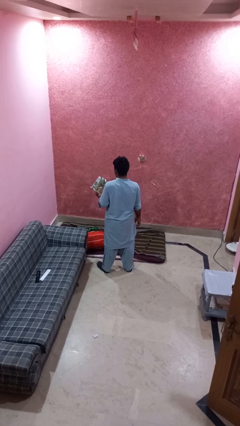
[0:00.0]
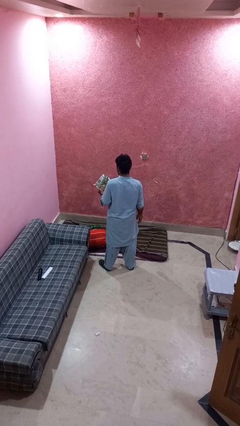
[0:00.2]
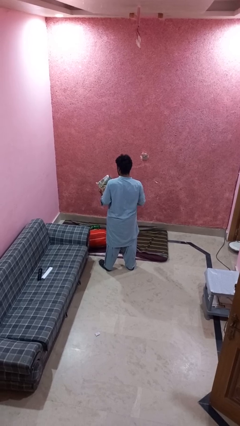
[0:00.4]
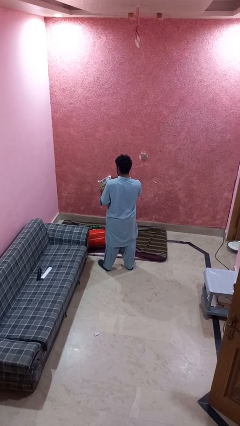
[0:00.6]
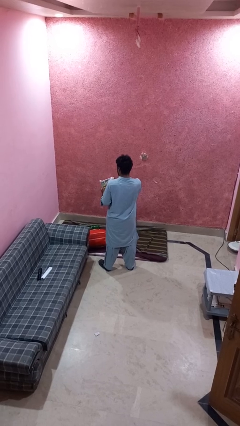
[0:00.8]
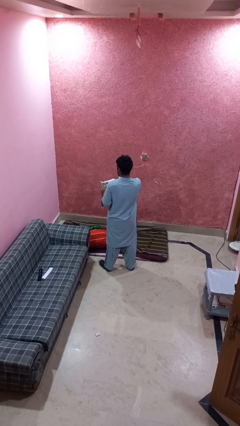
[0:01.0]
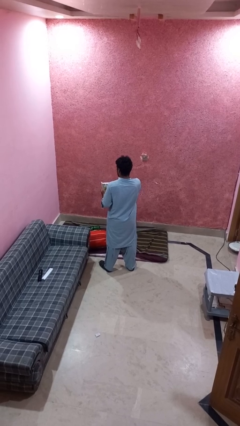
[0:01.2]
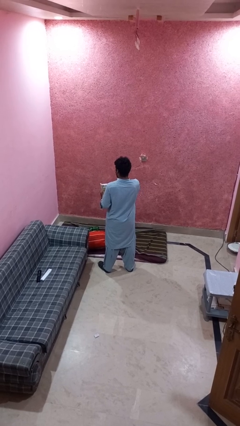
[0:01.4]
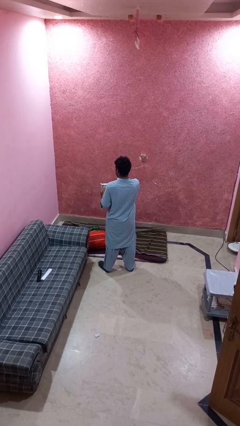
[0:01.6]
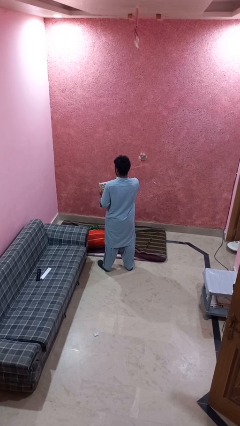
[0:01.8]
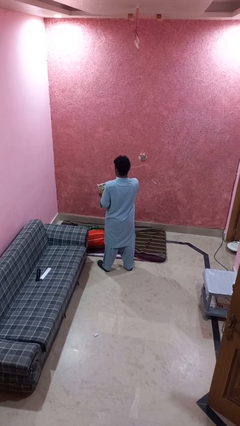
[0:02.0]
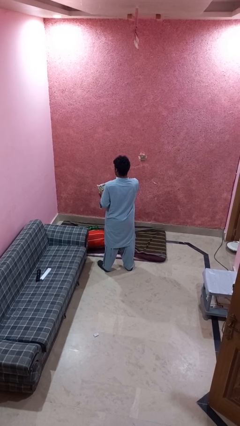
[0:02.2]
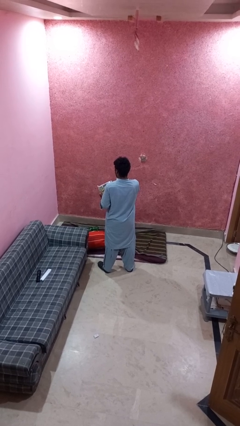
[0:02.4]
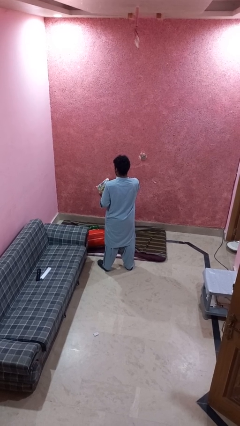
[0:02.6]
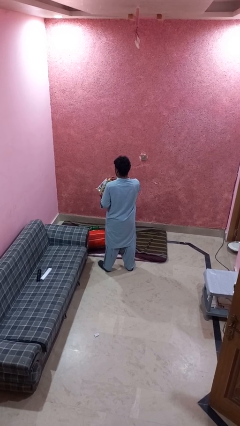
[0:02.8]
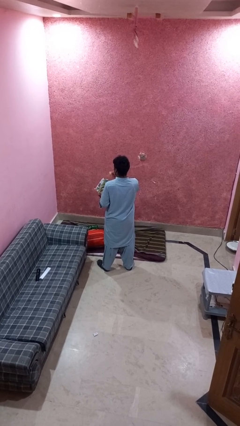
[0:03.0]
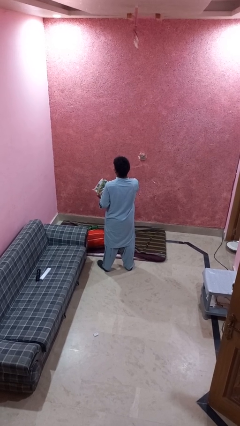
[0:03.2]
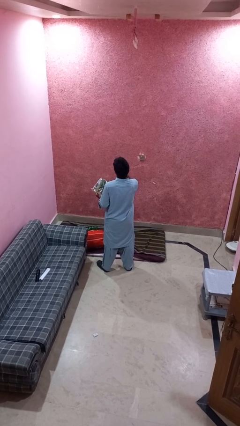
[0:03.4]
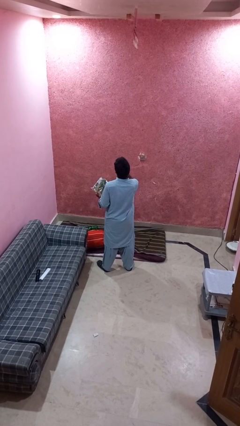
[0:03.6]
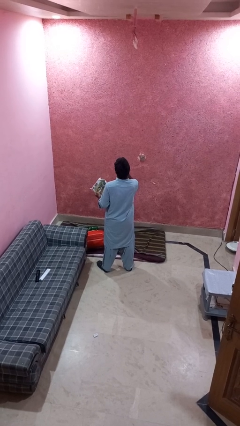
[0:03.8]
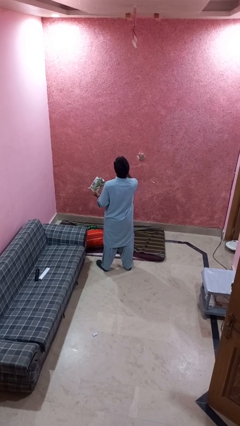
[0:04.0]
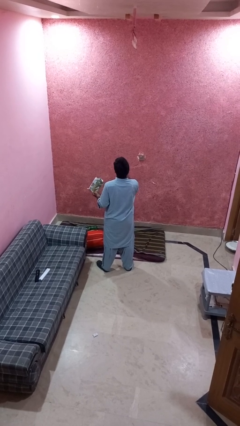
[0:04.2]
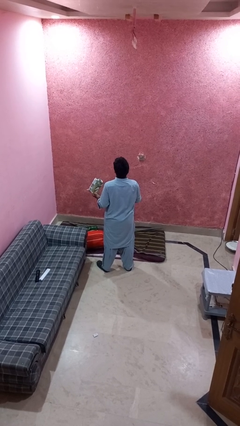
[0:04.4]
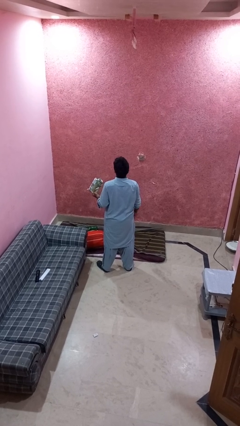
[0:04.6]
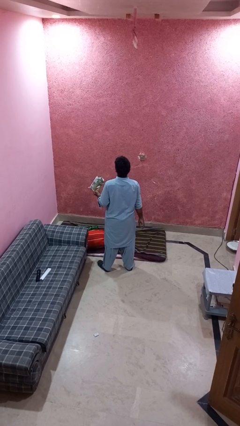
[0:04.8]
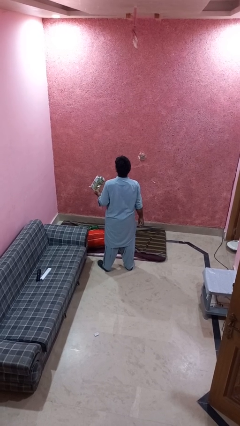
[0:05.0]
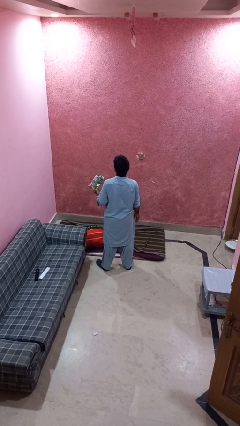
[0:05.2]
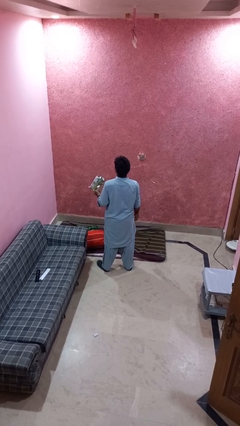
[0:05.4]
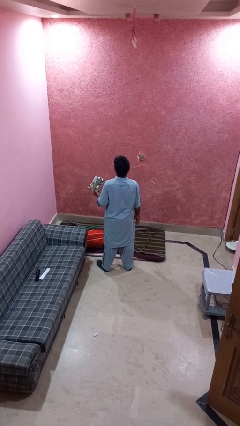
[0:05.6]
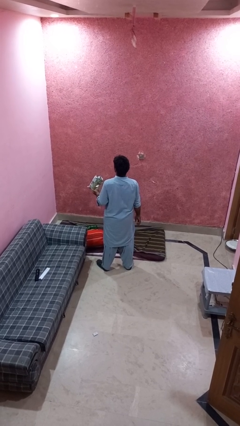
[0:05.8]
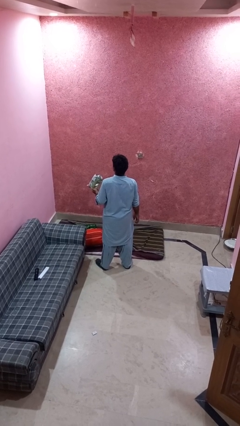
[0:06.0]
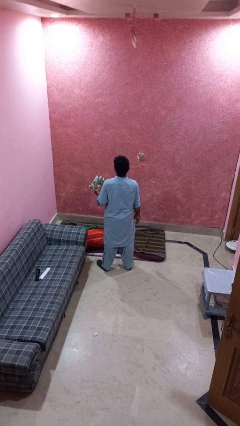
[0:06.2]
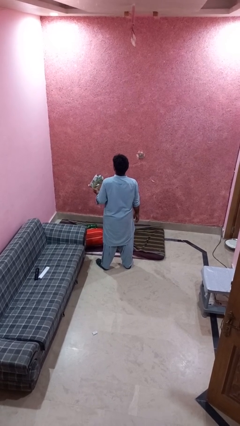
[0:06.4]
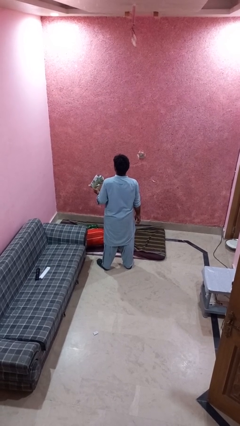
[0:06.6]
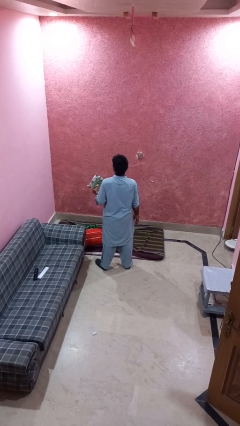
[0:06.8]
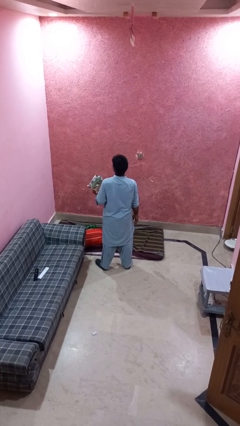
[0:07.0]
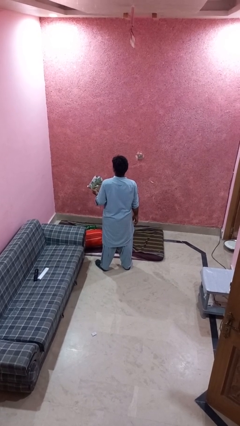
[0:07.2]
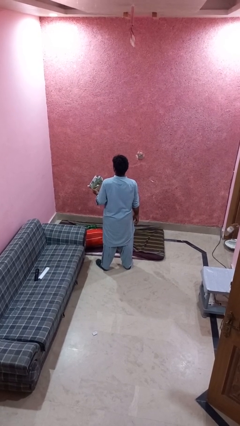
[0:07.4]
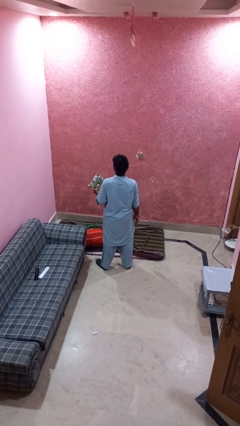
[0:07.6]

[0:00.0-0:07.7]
person eats snack from bag

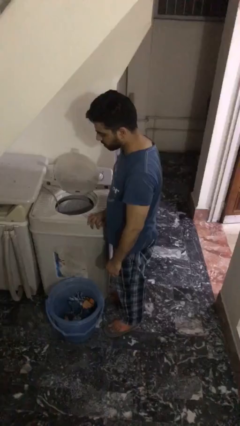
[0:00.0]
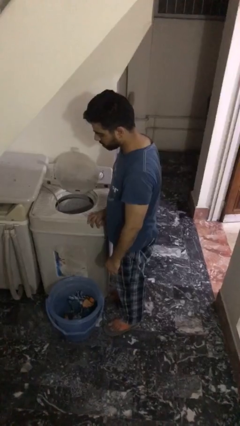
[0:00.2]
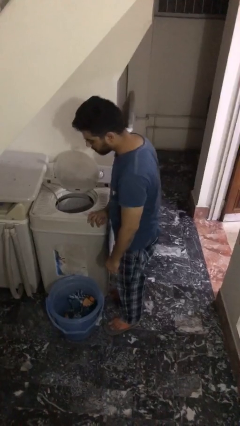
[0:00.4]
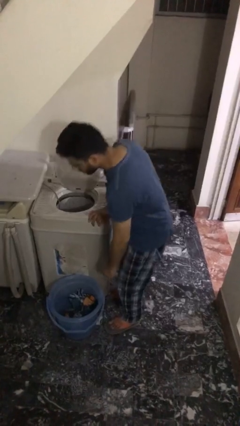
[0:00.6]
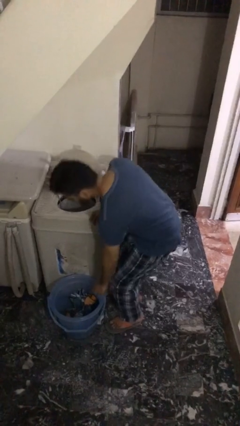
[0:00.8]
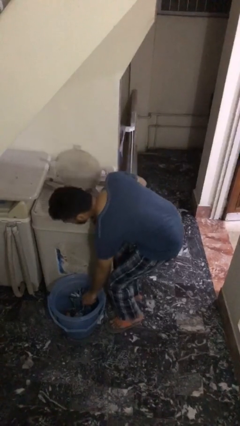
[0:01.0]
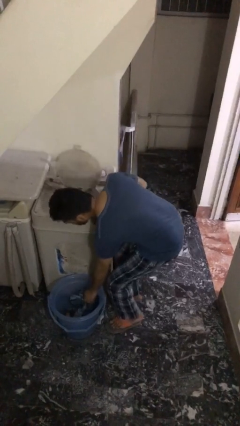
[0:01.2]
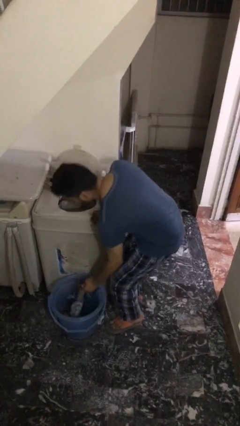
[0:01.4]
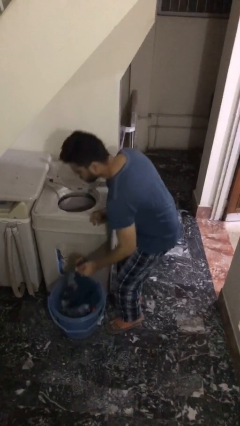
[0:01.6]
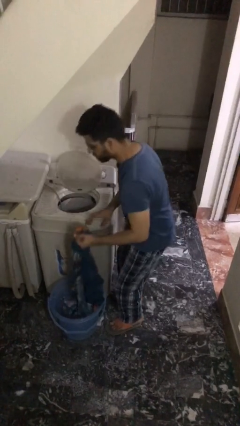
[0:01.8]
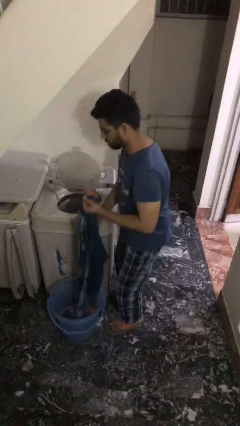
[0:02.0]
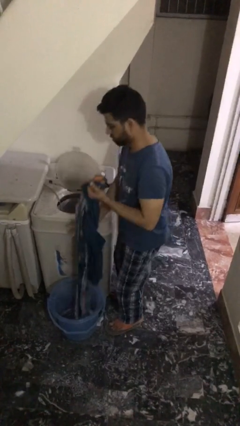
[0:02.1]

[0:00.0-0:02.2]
person unloads clotheswasher

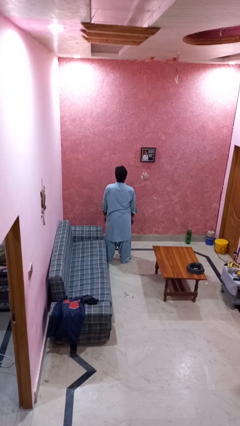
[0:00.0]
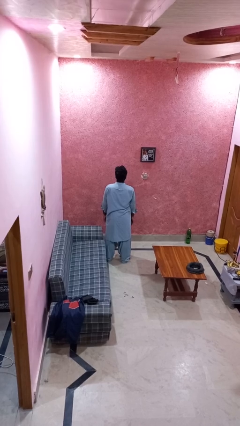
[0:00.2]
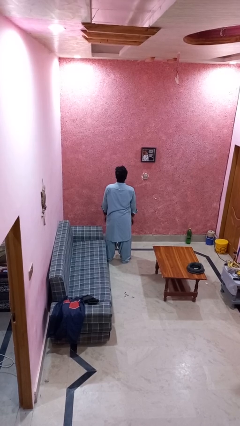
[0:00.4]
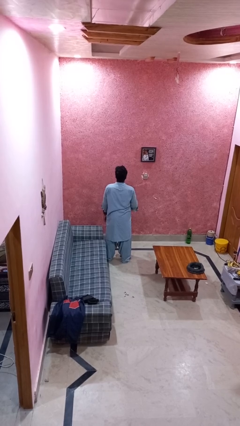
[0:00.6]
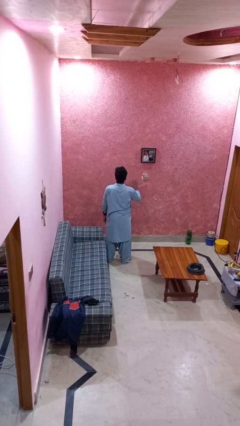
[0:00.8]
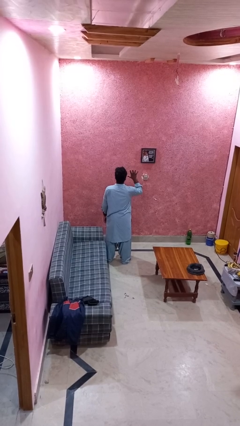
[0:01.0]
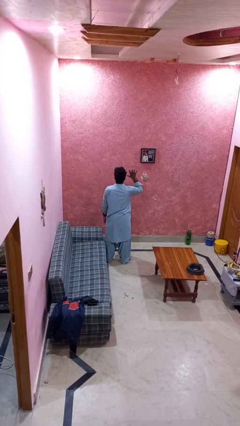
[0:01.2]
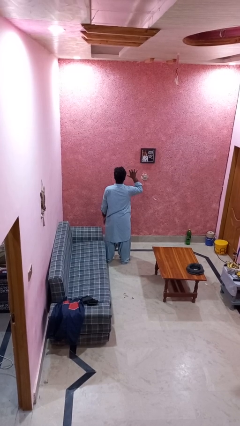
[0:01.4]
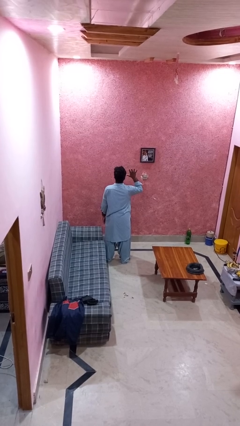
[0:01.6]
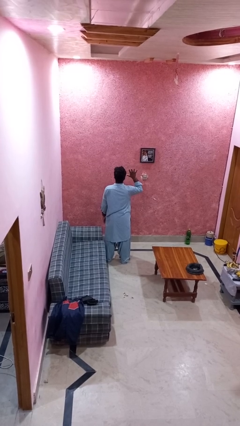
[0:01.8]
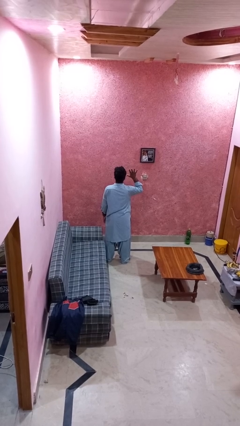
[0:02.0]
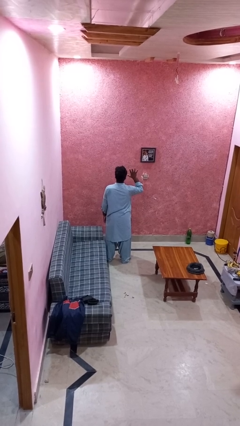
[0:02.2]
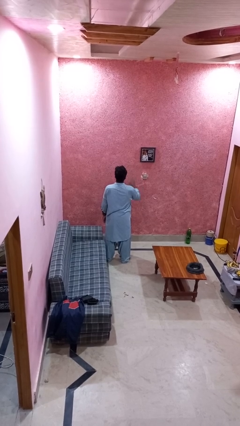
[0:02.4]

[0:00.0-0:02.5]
person gestures number five

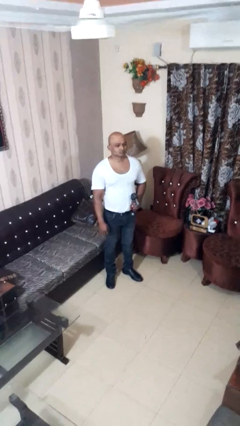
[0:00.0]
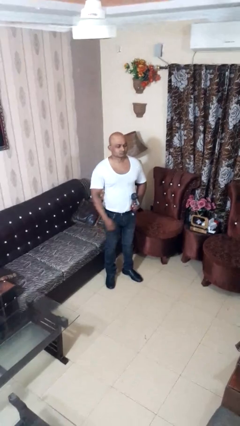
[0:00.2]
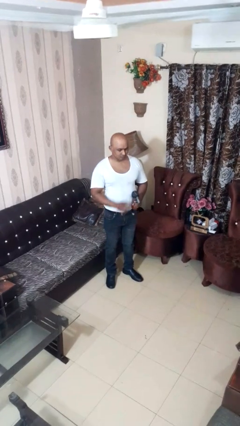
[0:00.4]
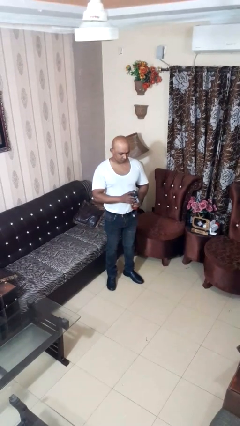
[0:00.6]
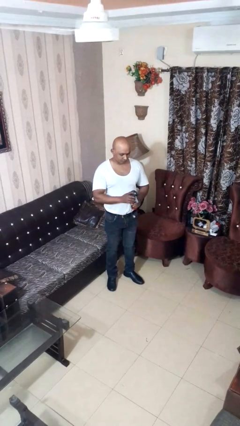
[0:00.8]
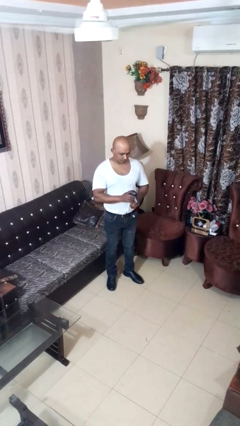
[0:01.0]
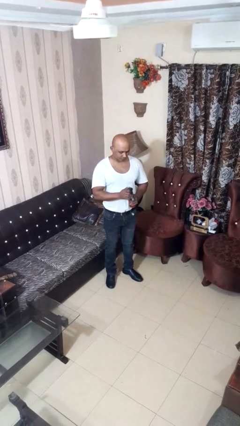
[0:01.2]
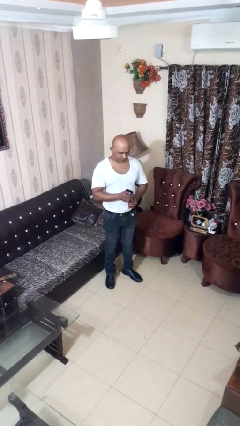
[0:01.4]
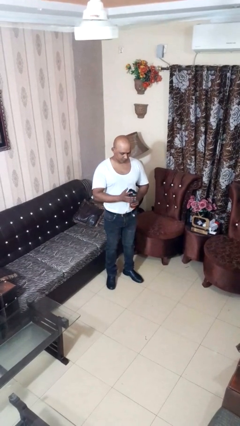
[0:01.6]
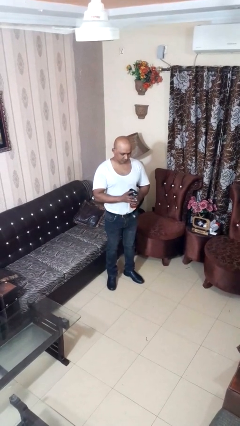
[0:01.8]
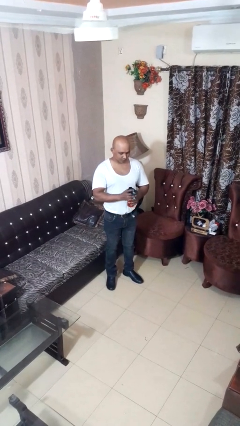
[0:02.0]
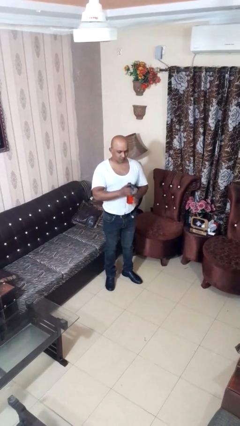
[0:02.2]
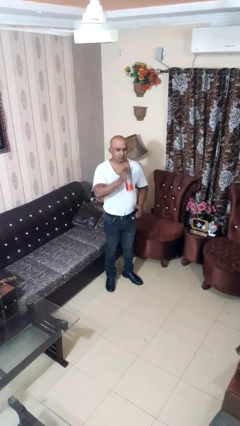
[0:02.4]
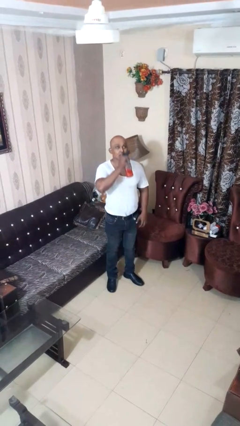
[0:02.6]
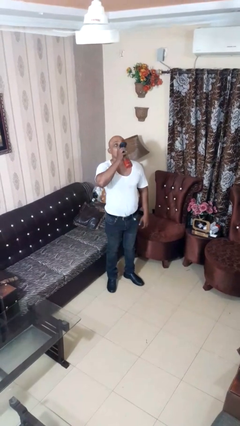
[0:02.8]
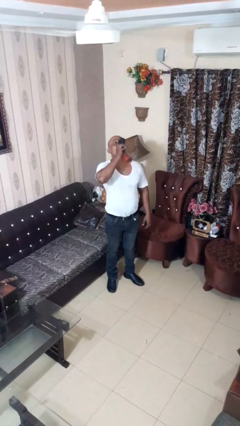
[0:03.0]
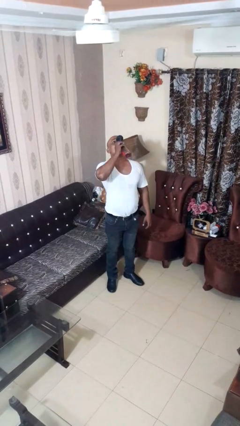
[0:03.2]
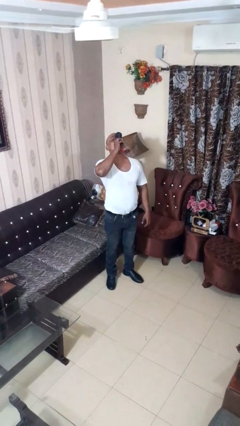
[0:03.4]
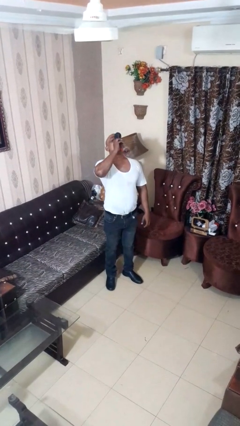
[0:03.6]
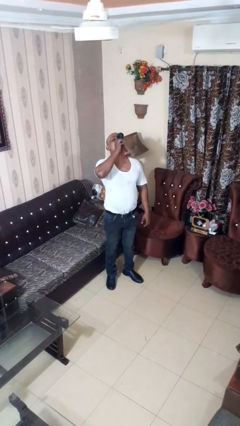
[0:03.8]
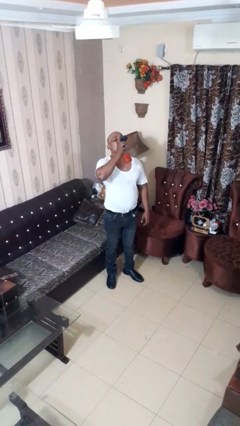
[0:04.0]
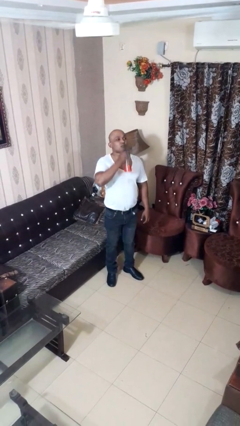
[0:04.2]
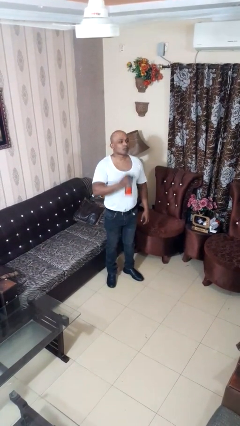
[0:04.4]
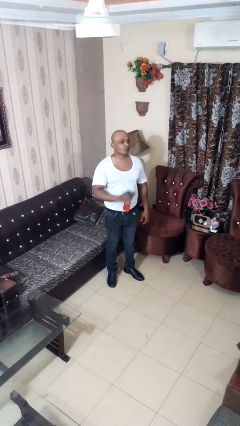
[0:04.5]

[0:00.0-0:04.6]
person drinks from bottle

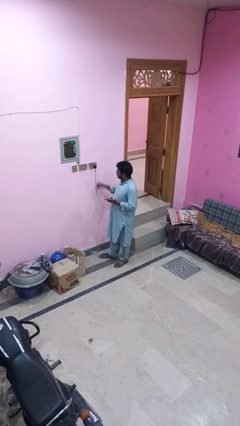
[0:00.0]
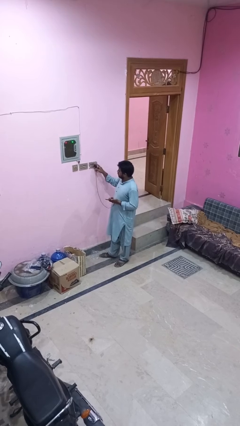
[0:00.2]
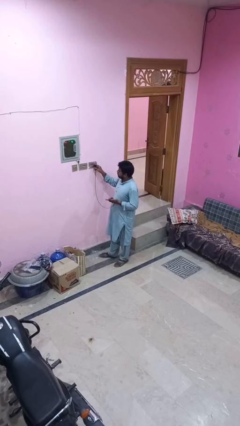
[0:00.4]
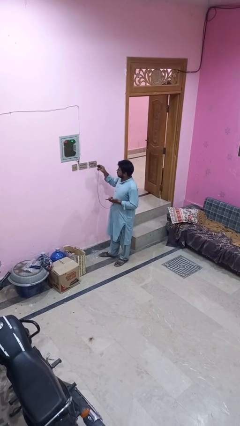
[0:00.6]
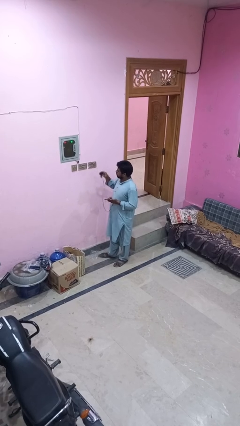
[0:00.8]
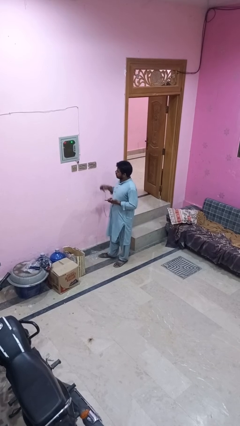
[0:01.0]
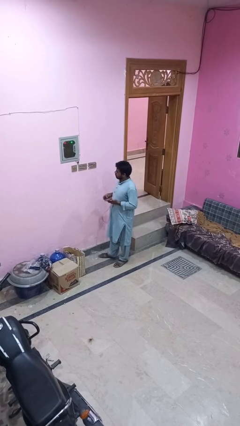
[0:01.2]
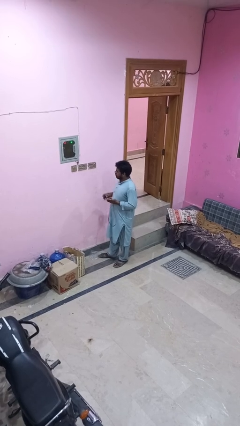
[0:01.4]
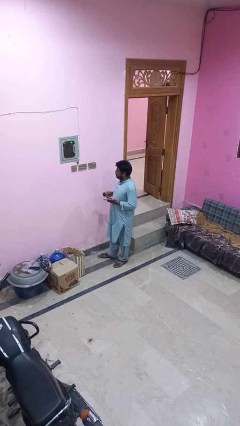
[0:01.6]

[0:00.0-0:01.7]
person unplugs from electrical socket
